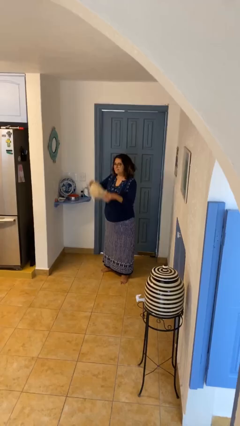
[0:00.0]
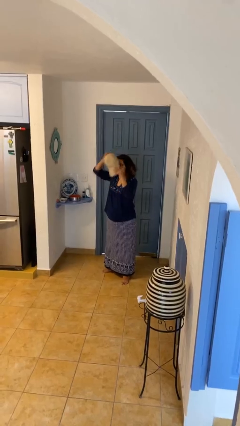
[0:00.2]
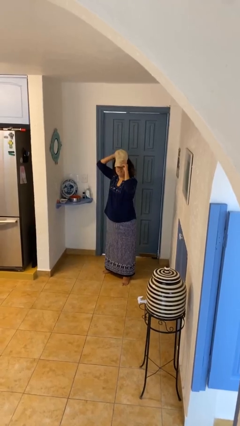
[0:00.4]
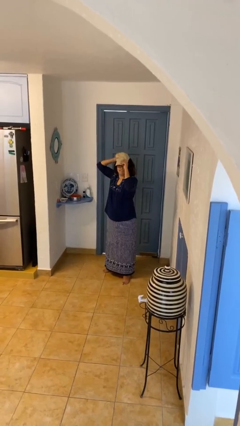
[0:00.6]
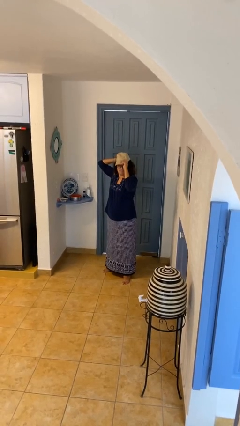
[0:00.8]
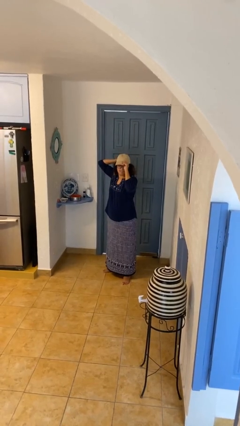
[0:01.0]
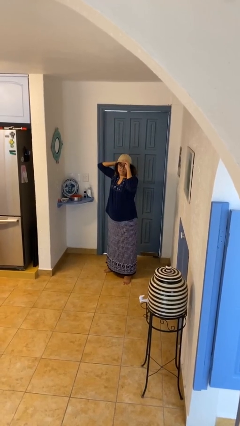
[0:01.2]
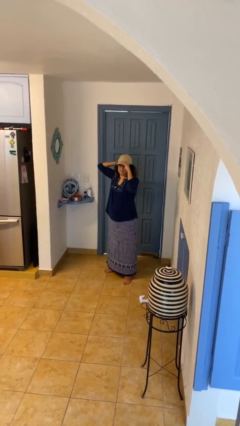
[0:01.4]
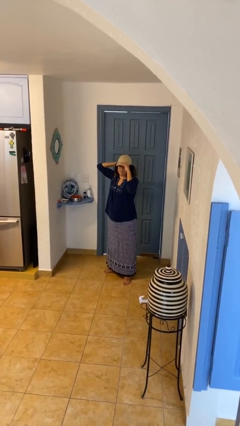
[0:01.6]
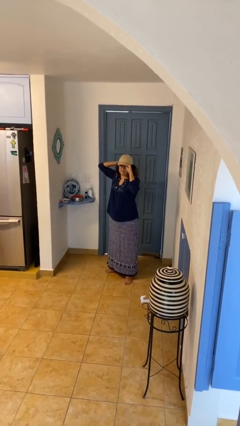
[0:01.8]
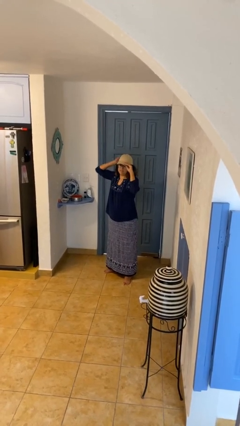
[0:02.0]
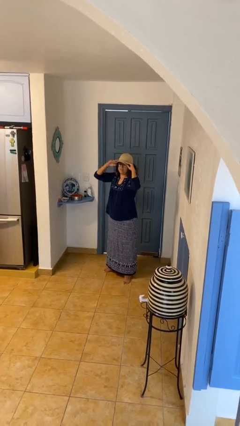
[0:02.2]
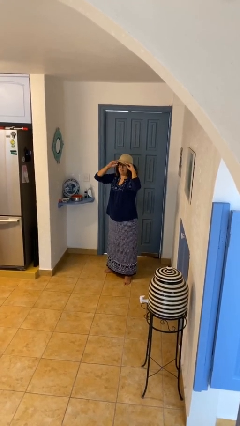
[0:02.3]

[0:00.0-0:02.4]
person puts on hat

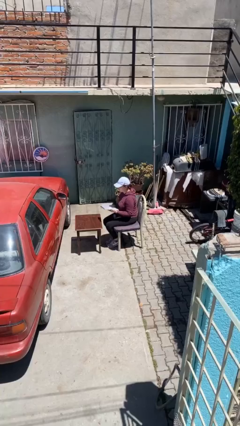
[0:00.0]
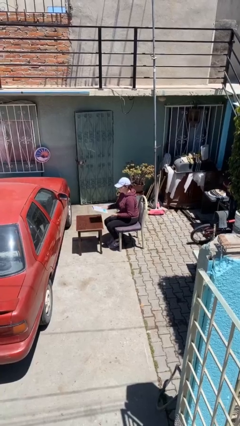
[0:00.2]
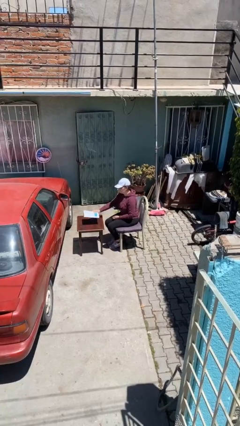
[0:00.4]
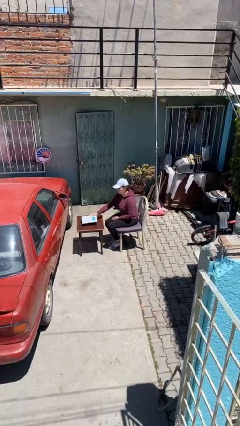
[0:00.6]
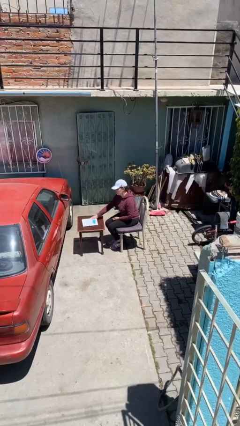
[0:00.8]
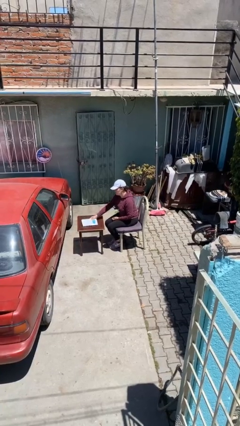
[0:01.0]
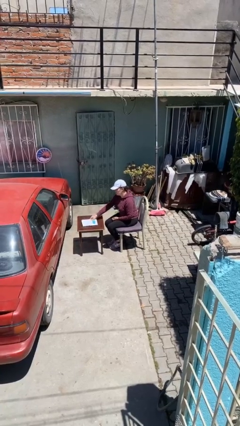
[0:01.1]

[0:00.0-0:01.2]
person puts down object on table

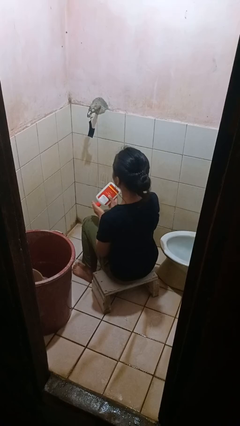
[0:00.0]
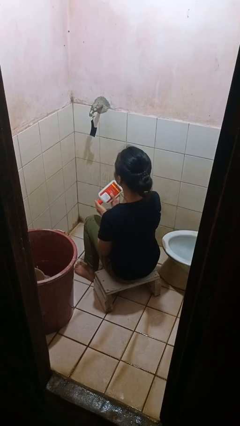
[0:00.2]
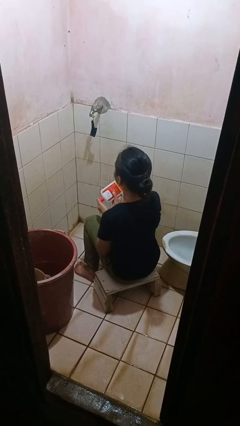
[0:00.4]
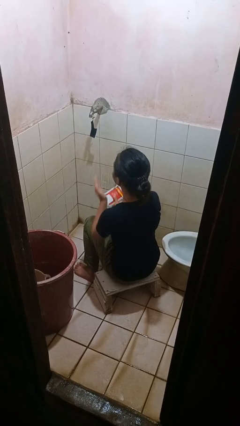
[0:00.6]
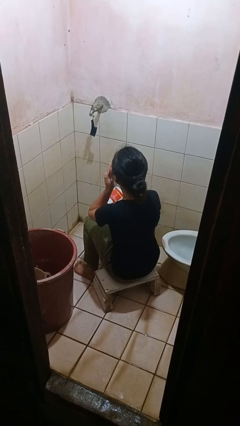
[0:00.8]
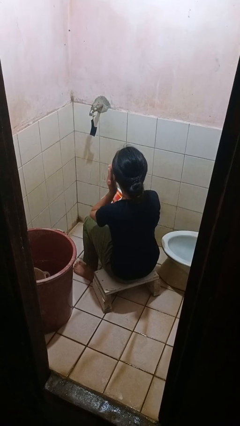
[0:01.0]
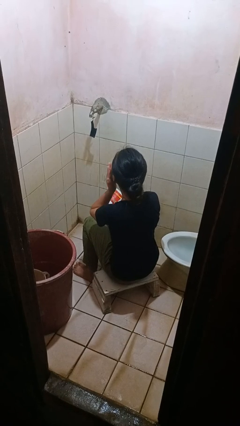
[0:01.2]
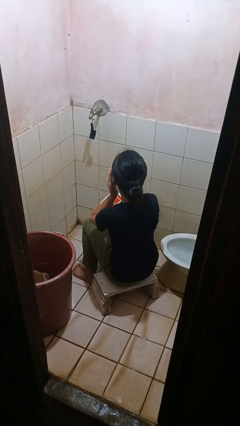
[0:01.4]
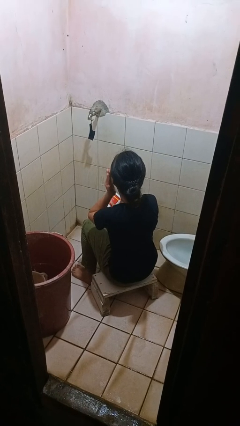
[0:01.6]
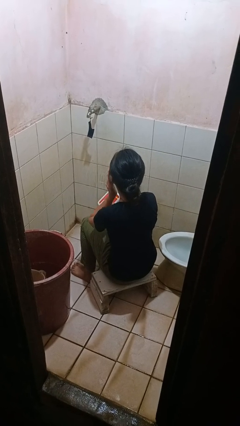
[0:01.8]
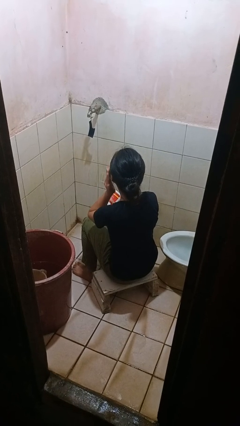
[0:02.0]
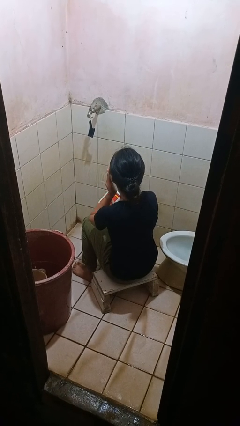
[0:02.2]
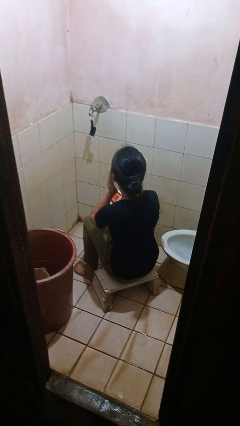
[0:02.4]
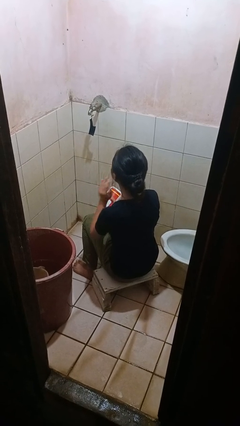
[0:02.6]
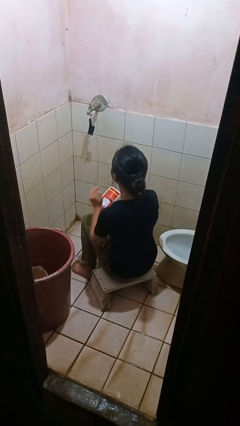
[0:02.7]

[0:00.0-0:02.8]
person applies facial moisturizer

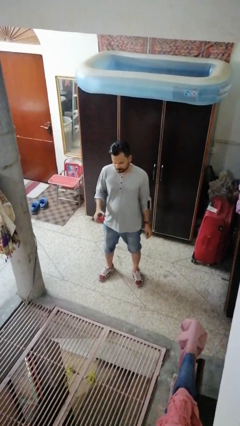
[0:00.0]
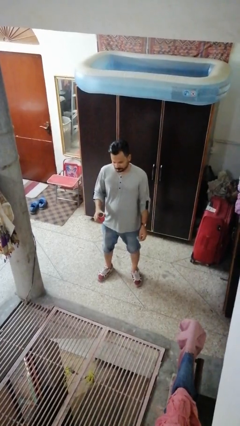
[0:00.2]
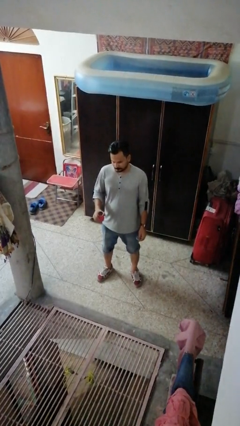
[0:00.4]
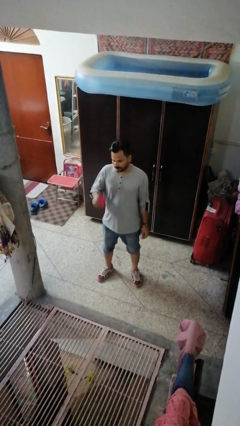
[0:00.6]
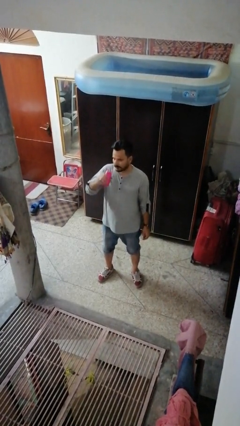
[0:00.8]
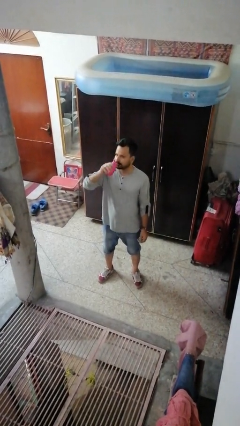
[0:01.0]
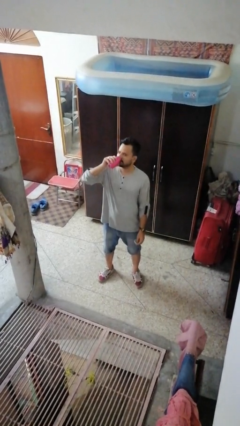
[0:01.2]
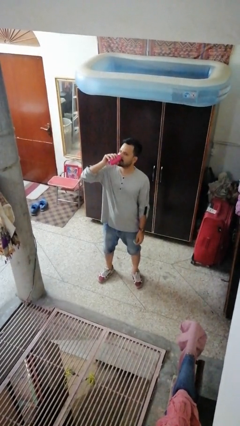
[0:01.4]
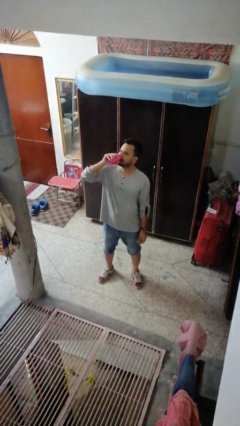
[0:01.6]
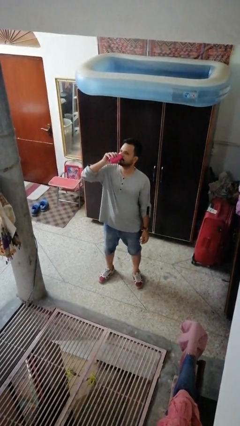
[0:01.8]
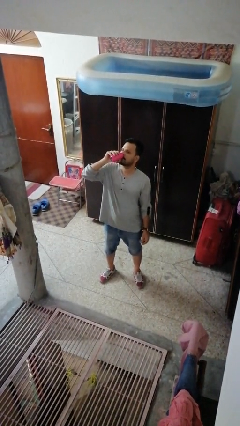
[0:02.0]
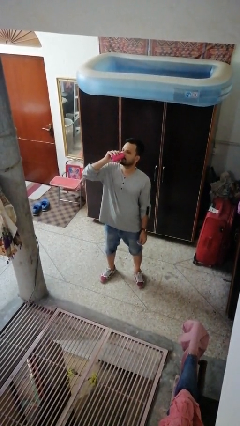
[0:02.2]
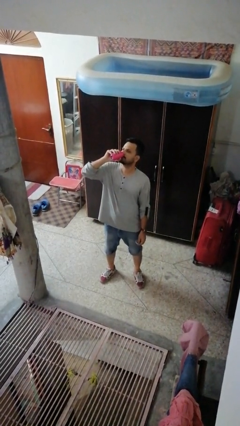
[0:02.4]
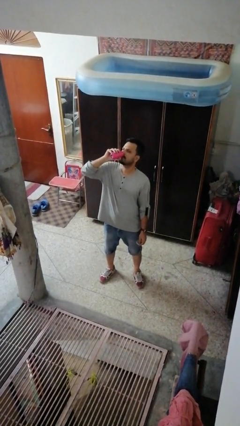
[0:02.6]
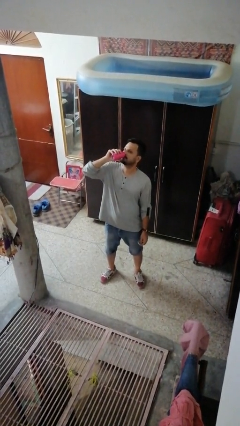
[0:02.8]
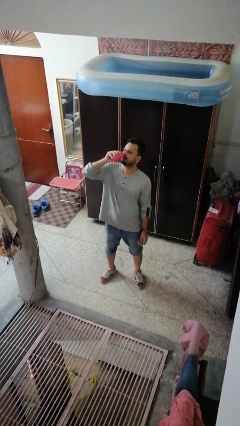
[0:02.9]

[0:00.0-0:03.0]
person drinks from beverage can

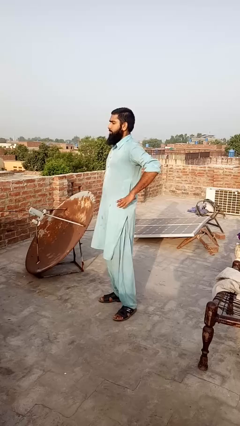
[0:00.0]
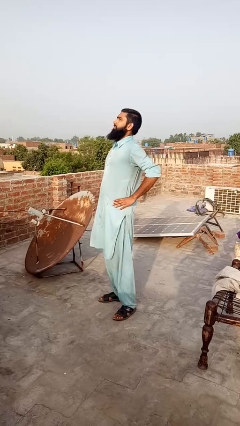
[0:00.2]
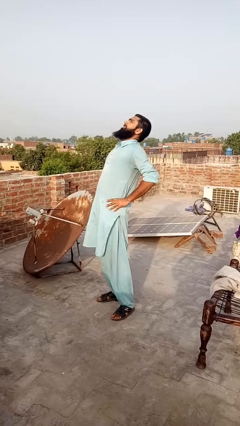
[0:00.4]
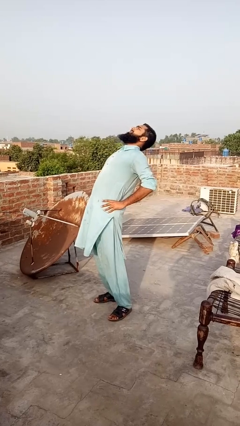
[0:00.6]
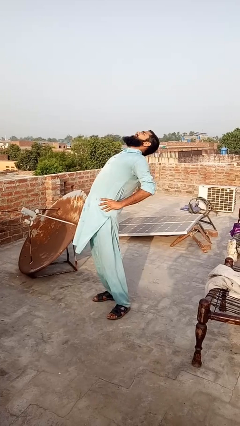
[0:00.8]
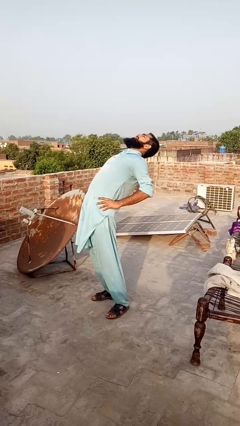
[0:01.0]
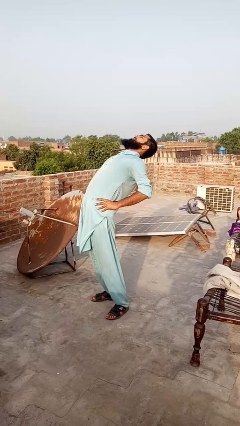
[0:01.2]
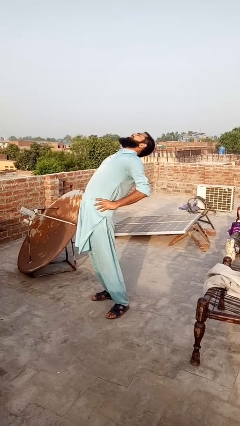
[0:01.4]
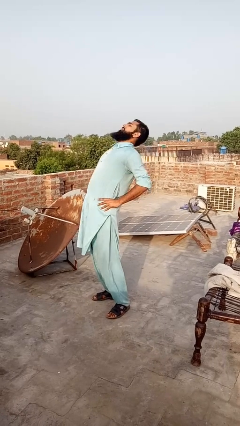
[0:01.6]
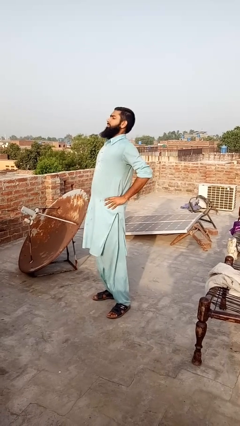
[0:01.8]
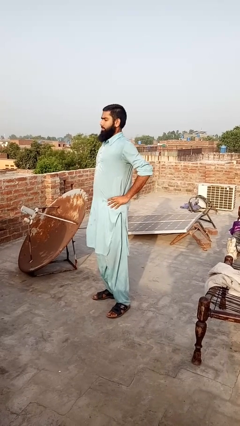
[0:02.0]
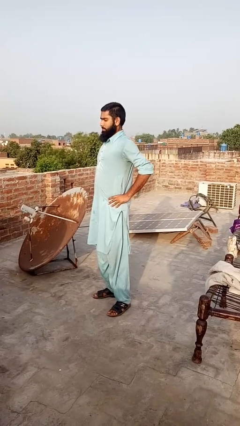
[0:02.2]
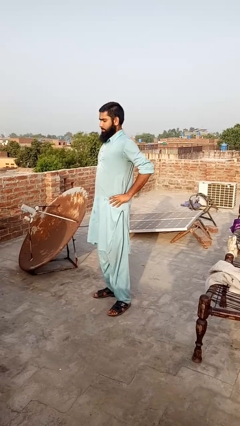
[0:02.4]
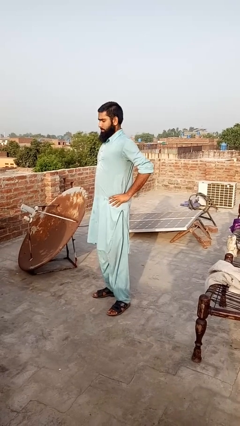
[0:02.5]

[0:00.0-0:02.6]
person stretches back

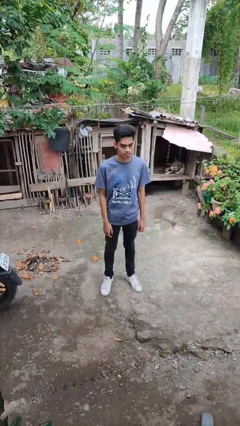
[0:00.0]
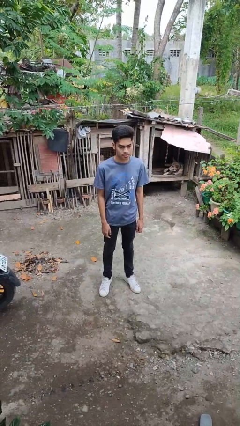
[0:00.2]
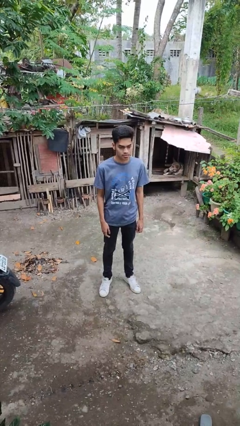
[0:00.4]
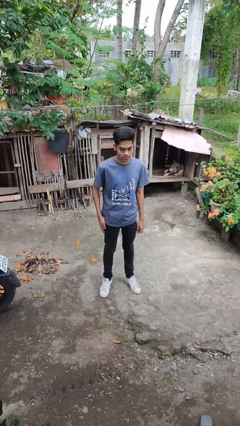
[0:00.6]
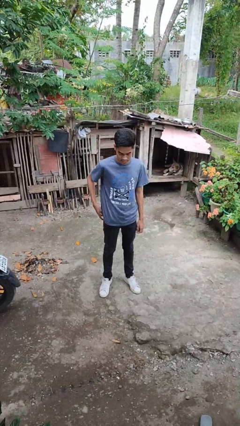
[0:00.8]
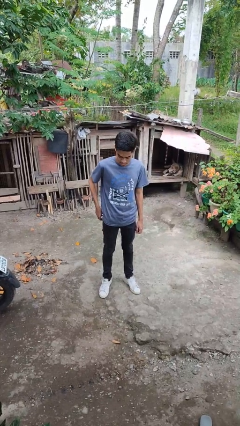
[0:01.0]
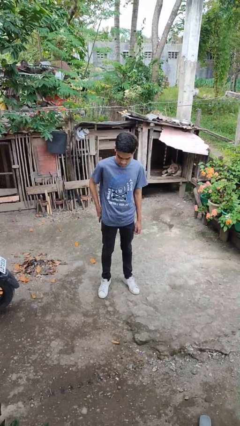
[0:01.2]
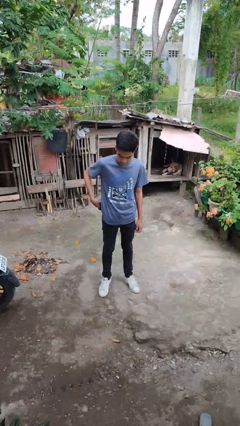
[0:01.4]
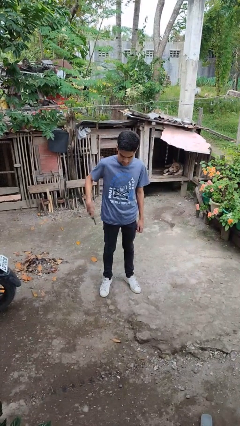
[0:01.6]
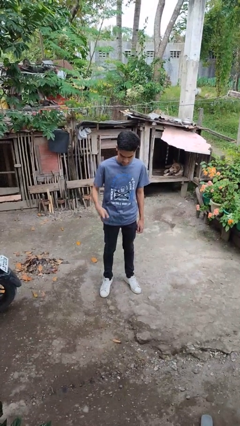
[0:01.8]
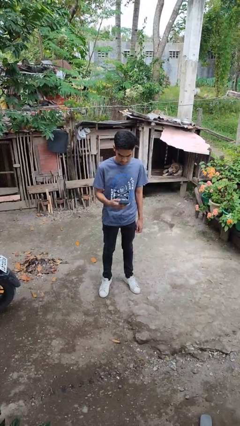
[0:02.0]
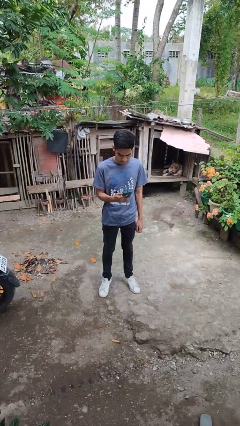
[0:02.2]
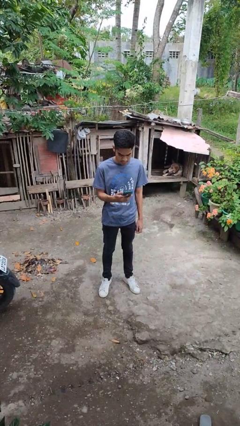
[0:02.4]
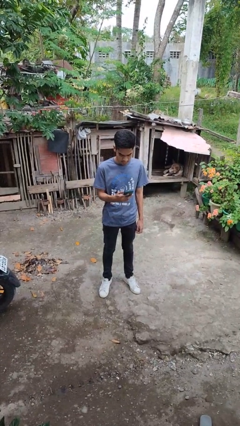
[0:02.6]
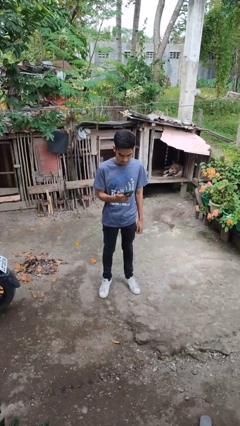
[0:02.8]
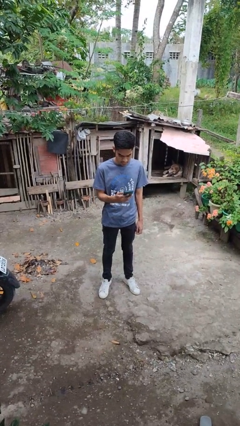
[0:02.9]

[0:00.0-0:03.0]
person takes phone from pocket

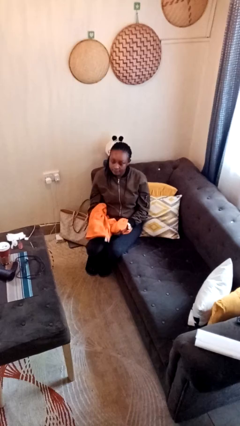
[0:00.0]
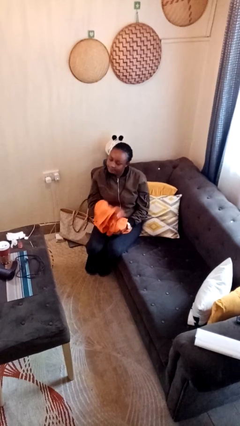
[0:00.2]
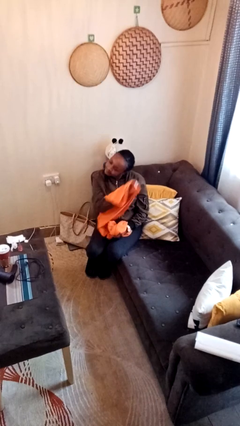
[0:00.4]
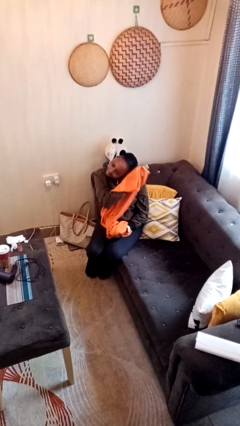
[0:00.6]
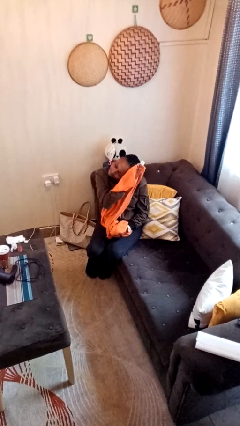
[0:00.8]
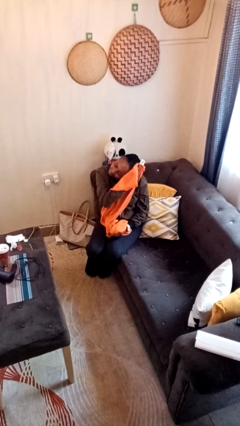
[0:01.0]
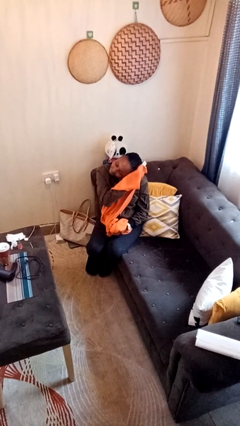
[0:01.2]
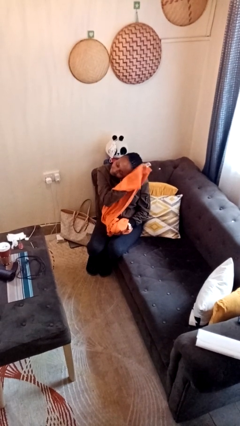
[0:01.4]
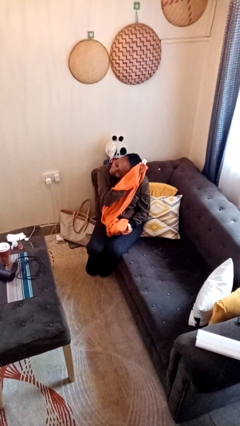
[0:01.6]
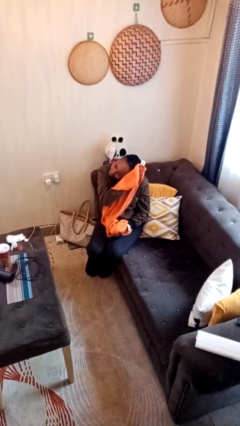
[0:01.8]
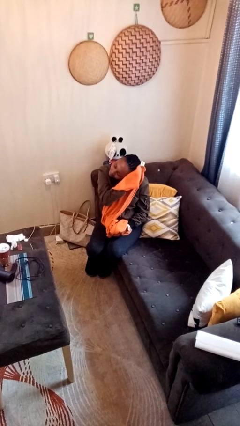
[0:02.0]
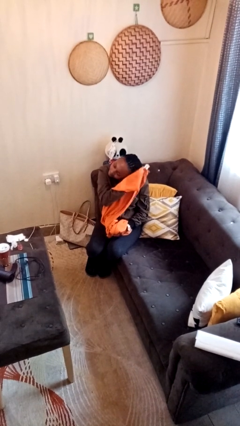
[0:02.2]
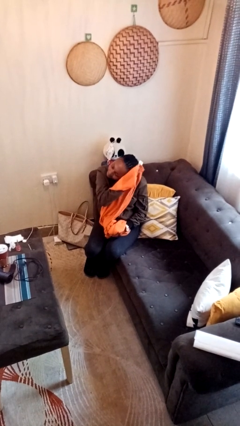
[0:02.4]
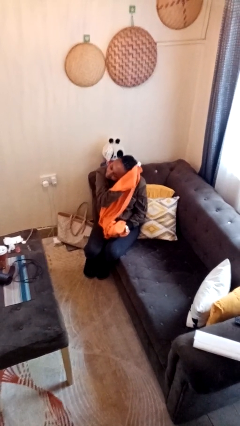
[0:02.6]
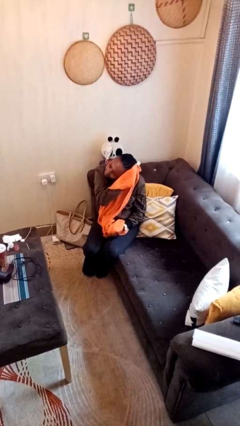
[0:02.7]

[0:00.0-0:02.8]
person dries hair with towel
